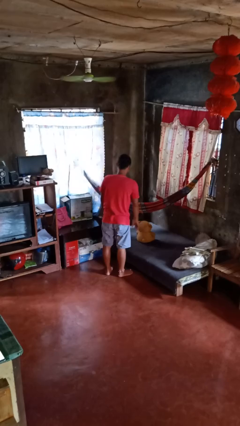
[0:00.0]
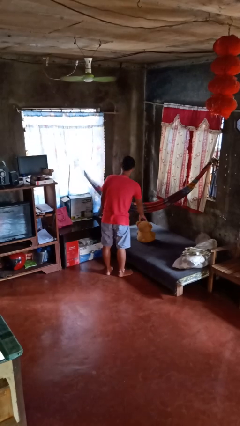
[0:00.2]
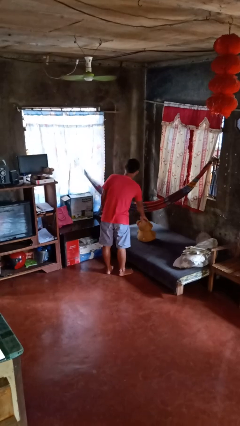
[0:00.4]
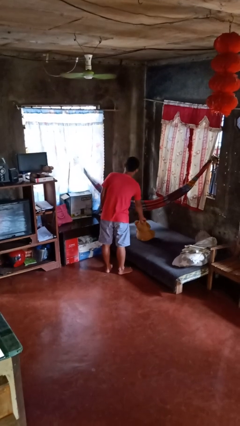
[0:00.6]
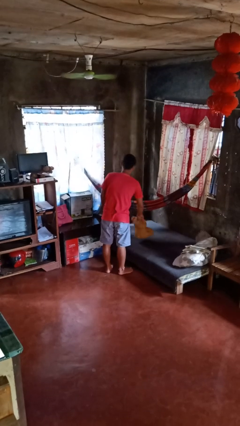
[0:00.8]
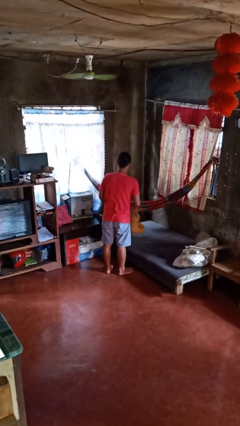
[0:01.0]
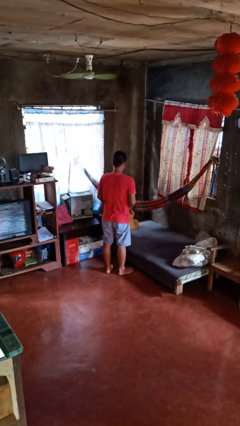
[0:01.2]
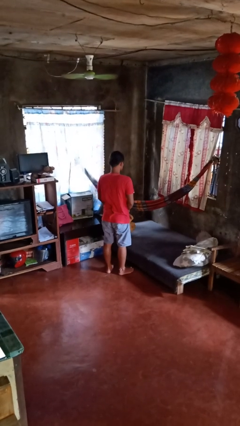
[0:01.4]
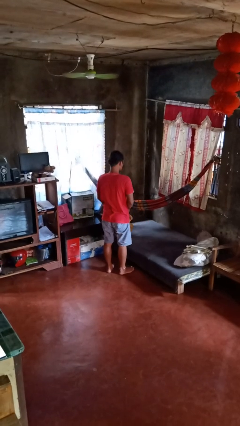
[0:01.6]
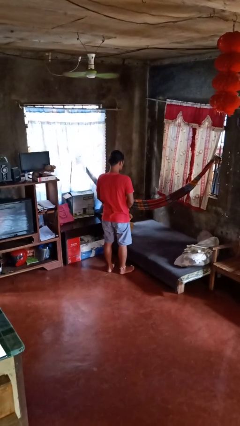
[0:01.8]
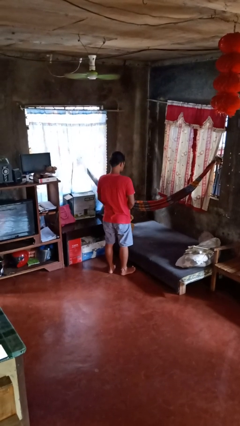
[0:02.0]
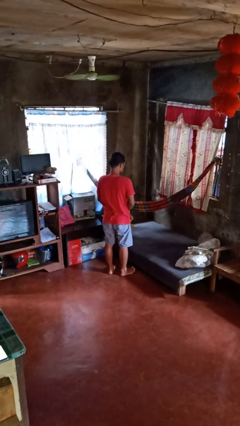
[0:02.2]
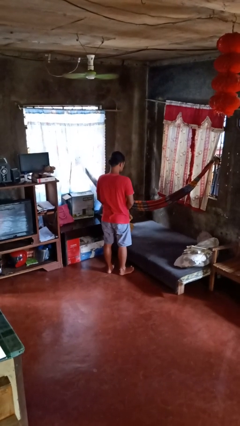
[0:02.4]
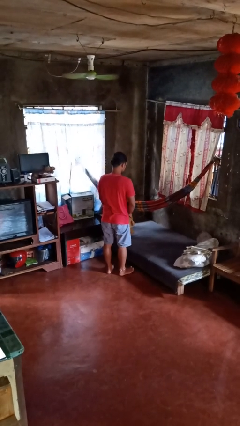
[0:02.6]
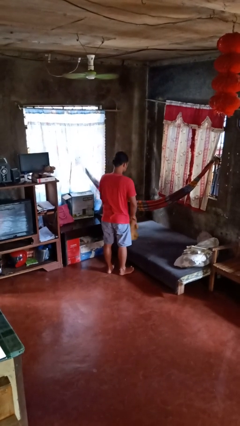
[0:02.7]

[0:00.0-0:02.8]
person picks up object from bed

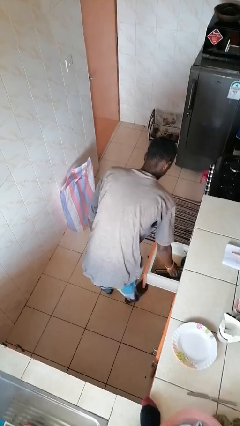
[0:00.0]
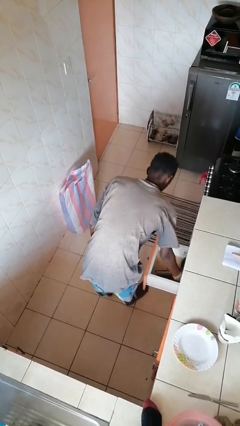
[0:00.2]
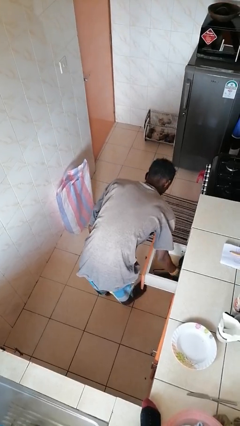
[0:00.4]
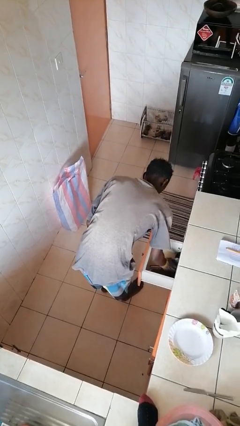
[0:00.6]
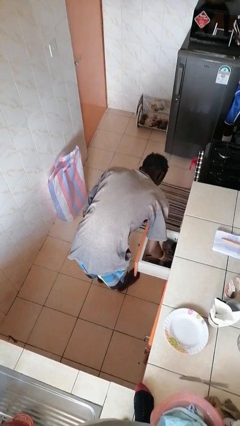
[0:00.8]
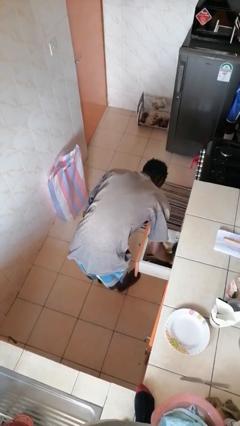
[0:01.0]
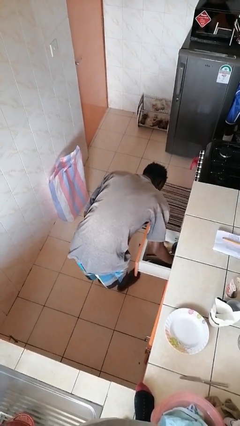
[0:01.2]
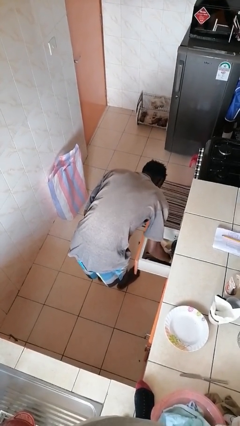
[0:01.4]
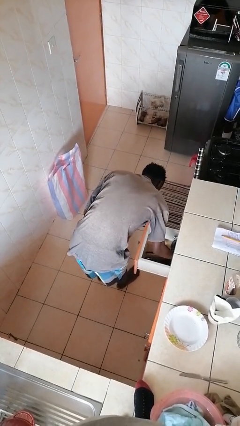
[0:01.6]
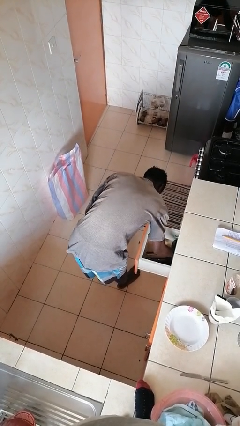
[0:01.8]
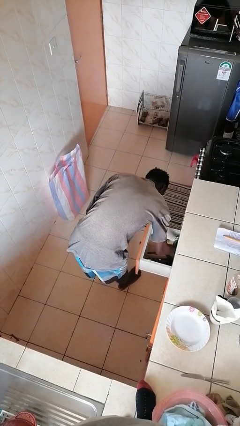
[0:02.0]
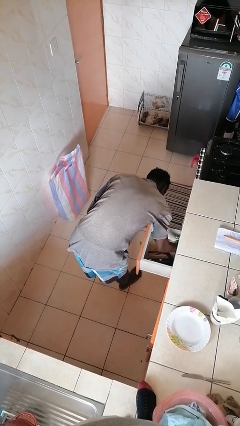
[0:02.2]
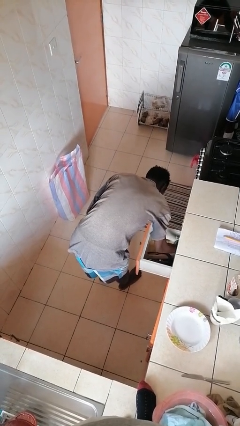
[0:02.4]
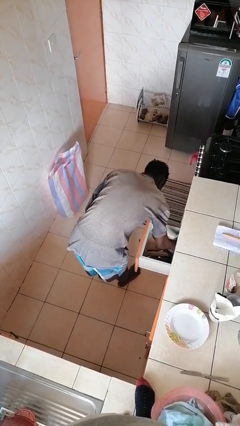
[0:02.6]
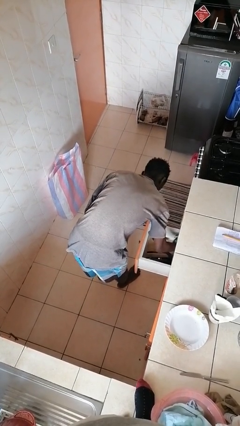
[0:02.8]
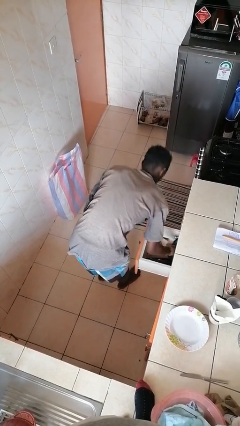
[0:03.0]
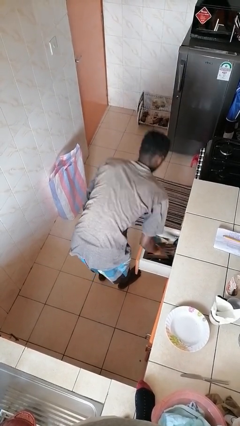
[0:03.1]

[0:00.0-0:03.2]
person searches in kitchen drawer

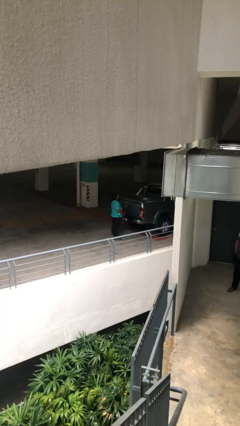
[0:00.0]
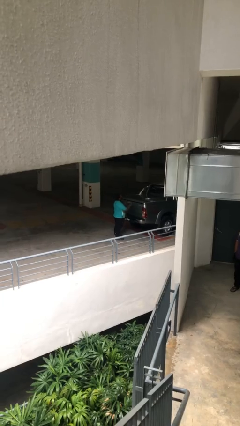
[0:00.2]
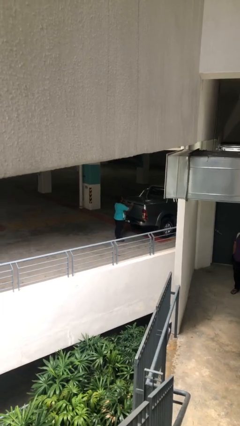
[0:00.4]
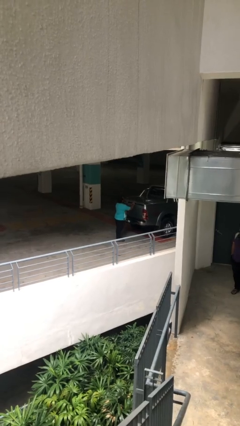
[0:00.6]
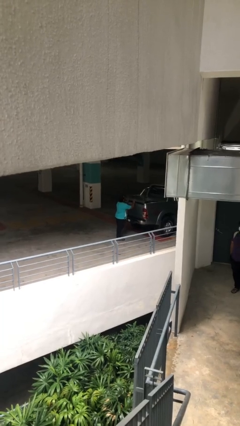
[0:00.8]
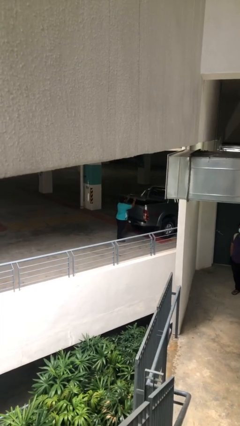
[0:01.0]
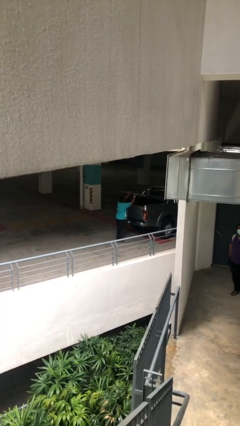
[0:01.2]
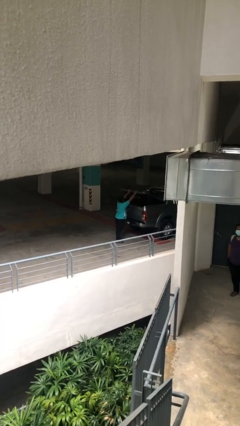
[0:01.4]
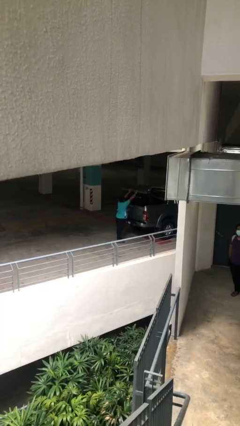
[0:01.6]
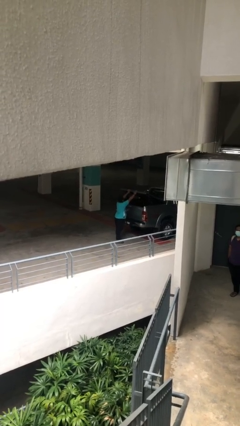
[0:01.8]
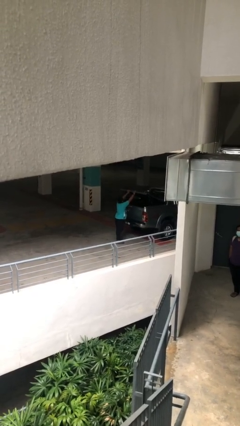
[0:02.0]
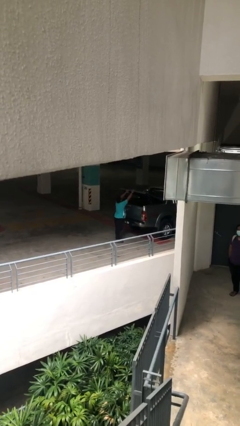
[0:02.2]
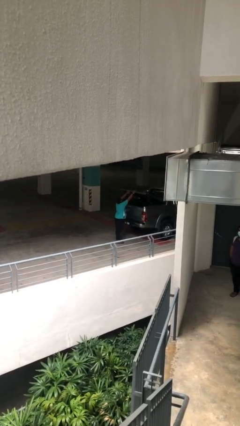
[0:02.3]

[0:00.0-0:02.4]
person opens car trunk

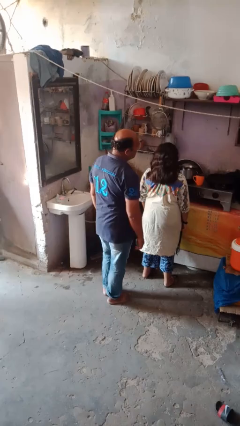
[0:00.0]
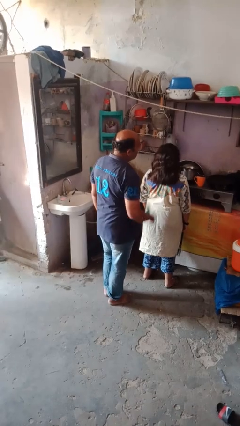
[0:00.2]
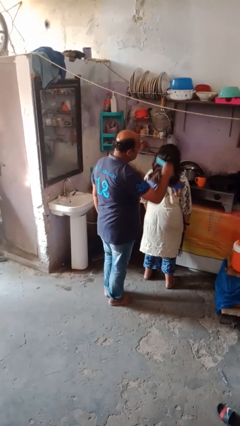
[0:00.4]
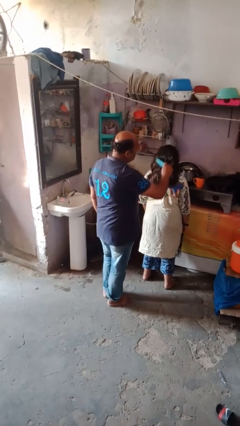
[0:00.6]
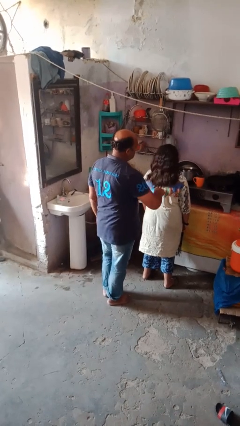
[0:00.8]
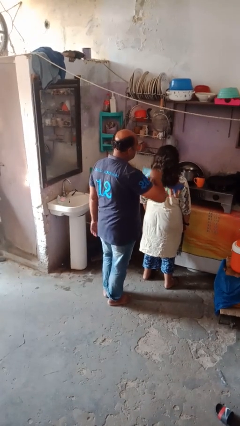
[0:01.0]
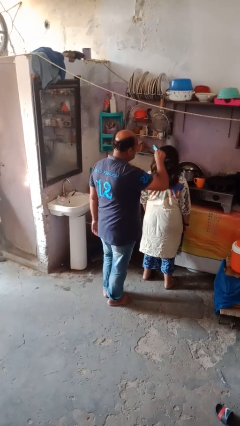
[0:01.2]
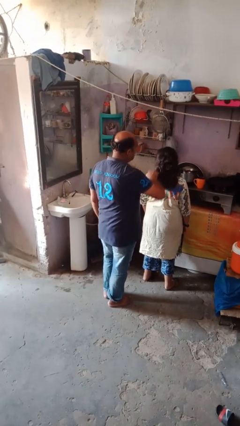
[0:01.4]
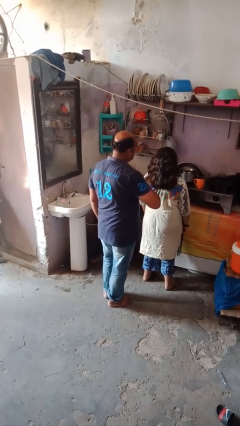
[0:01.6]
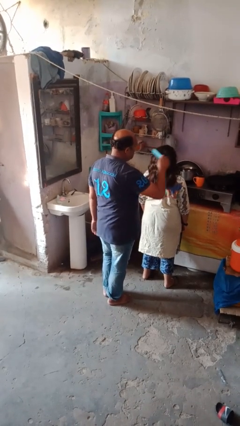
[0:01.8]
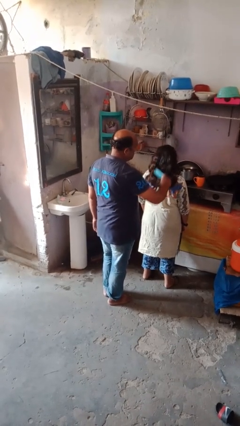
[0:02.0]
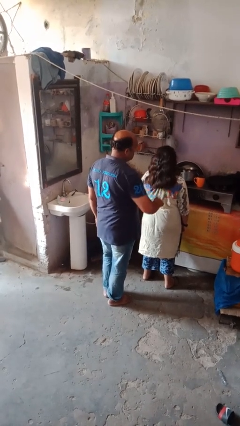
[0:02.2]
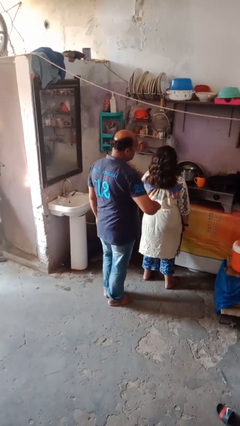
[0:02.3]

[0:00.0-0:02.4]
person brushes hair of person

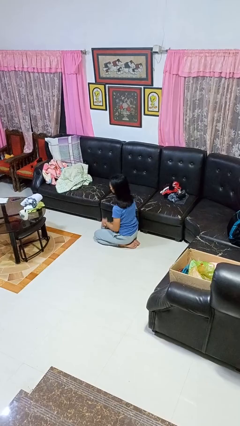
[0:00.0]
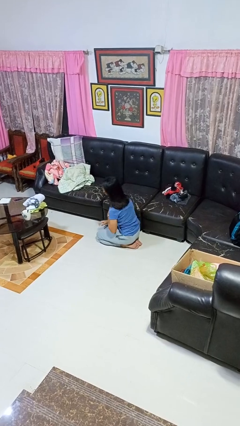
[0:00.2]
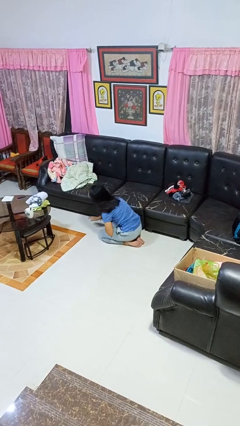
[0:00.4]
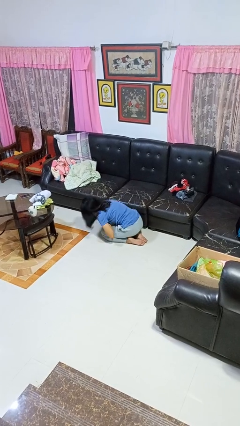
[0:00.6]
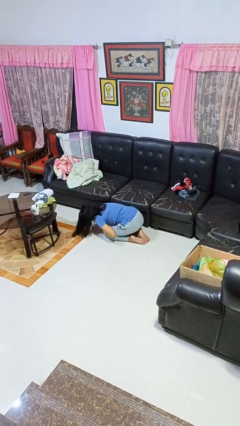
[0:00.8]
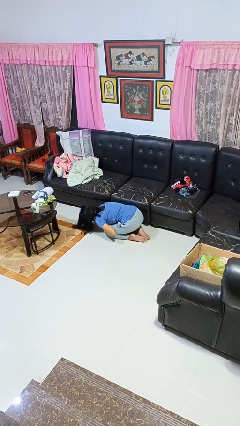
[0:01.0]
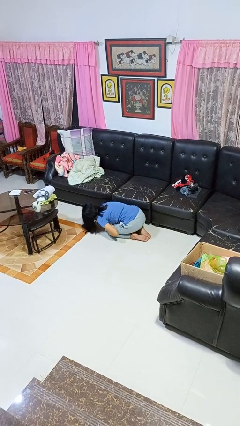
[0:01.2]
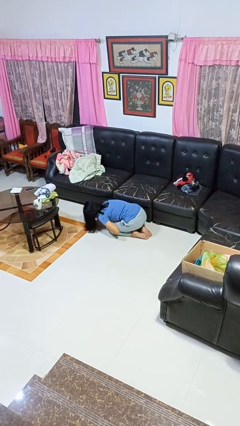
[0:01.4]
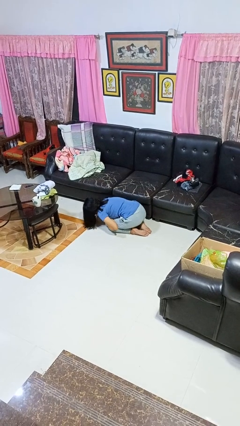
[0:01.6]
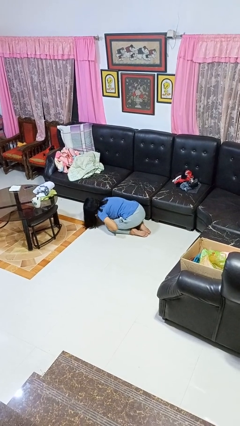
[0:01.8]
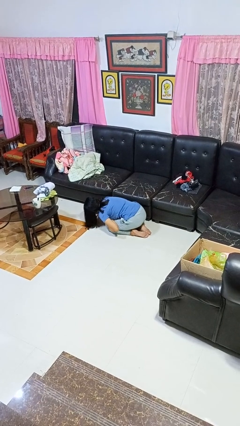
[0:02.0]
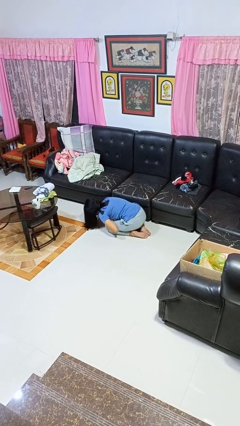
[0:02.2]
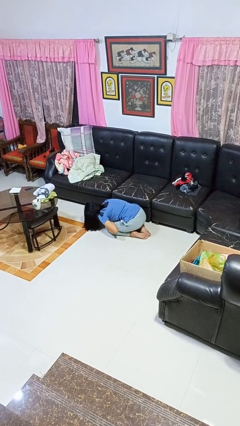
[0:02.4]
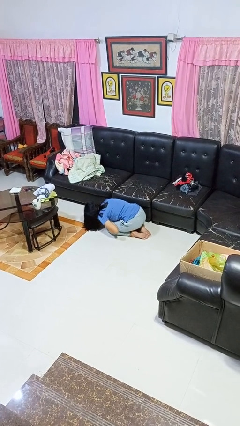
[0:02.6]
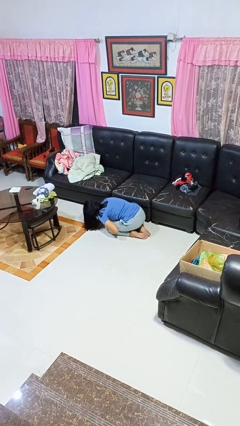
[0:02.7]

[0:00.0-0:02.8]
person searches under couch

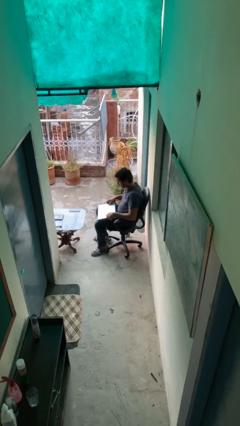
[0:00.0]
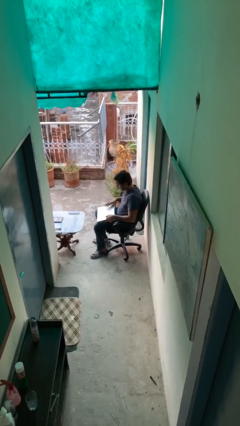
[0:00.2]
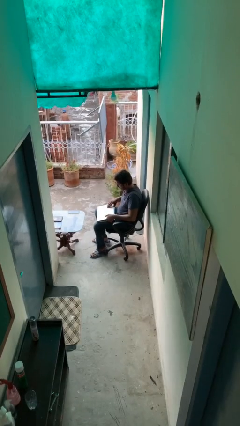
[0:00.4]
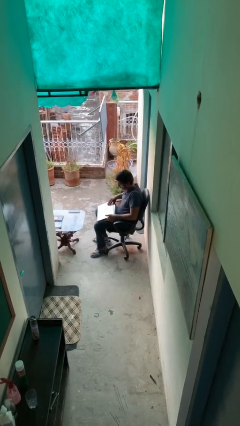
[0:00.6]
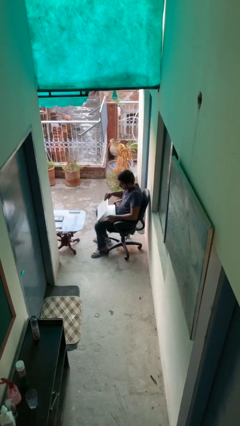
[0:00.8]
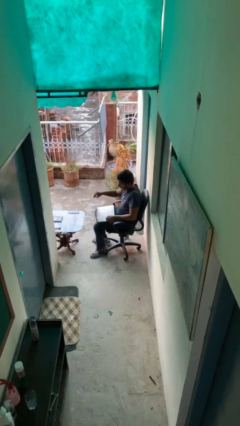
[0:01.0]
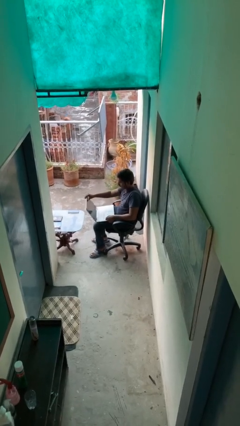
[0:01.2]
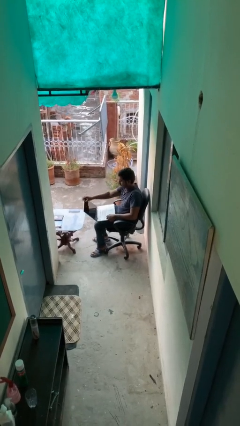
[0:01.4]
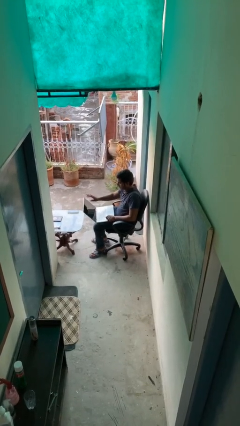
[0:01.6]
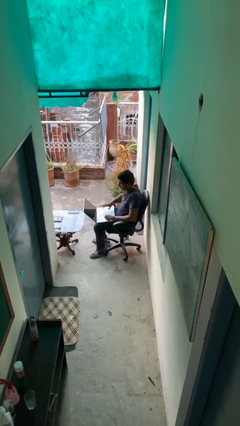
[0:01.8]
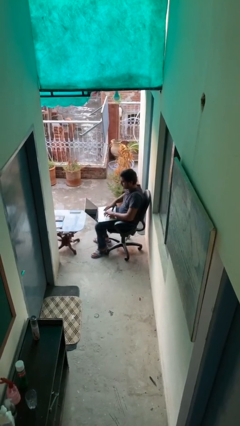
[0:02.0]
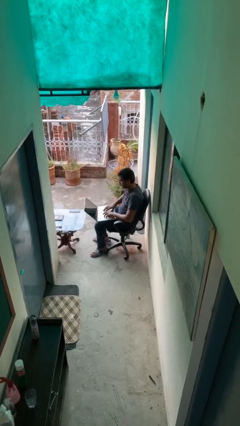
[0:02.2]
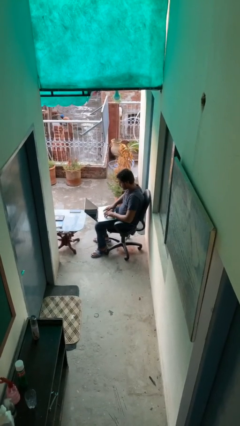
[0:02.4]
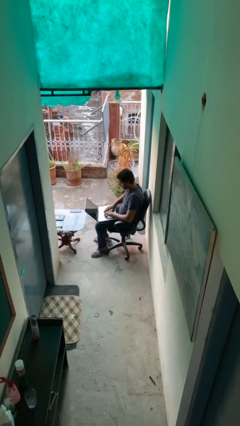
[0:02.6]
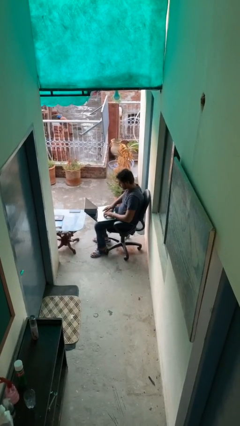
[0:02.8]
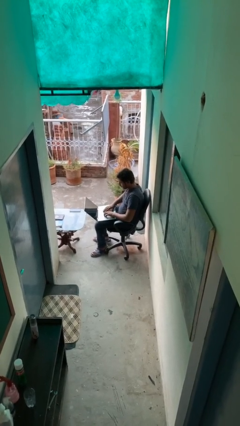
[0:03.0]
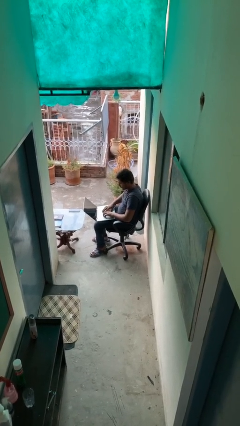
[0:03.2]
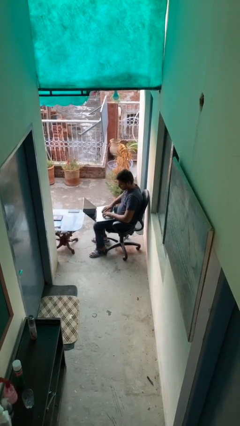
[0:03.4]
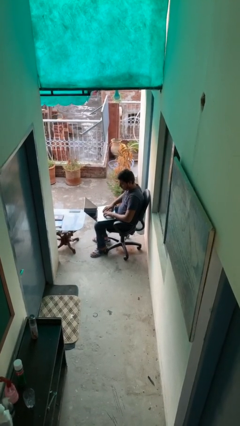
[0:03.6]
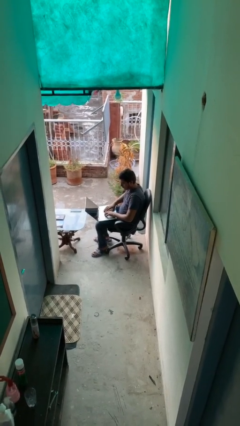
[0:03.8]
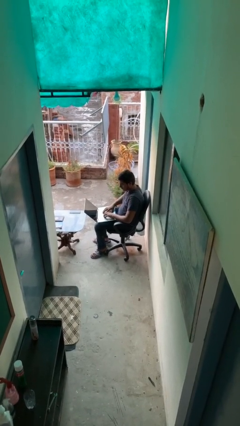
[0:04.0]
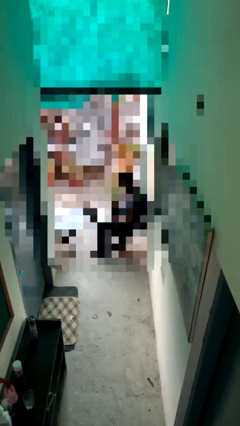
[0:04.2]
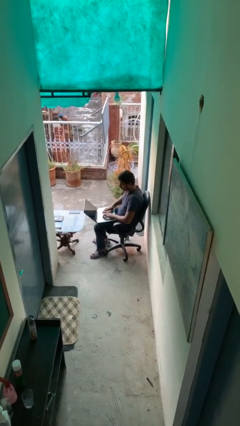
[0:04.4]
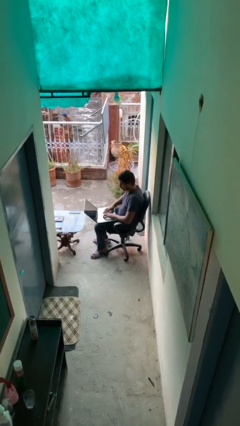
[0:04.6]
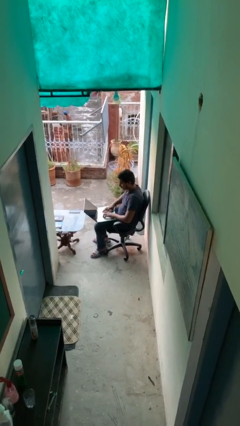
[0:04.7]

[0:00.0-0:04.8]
person interacts with laptop
